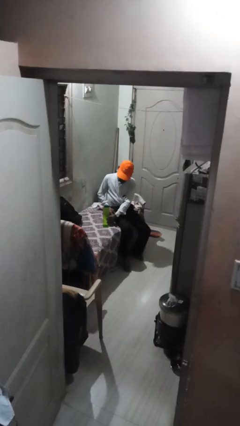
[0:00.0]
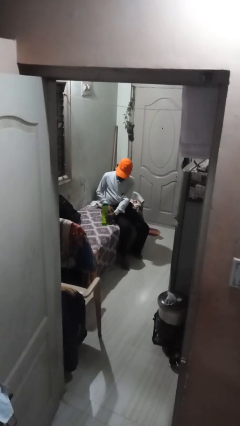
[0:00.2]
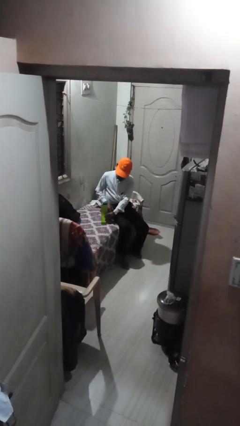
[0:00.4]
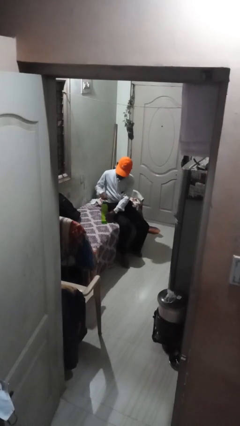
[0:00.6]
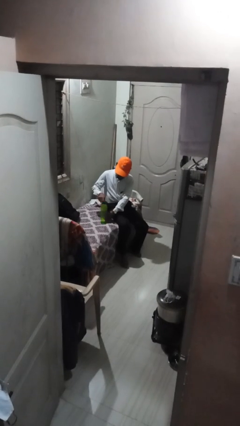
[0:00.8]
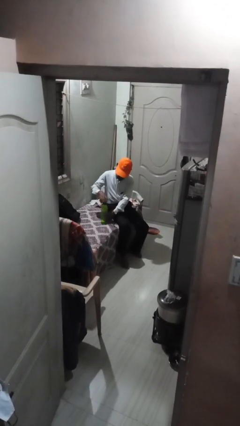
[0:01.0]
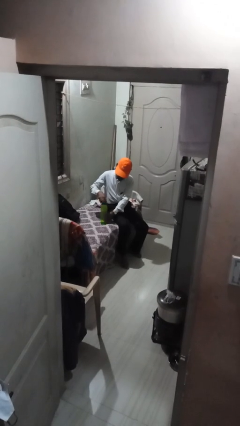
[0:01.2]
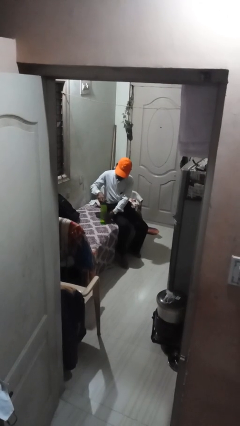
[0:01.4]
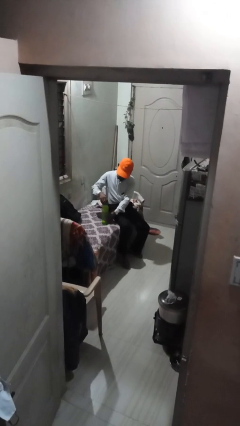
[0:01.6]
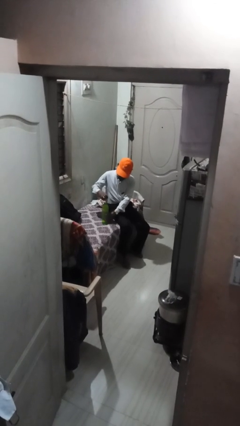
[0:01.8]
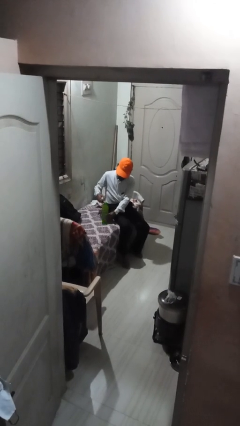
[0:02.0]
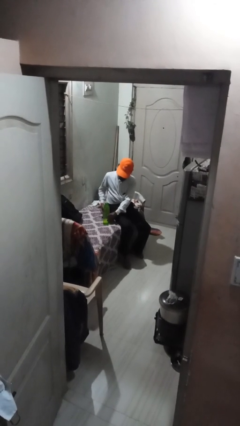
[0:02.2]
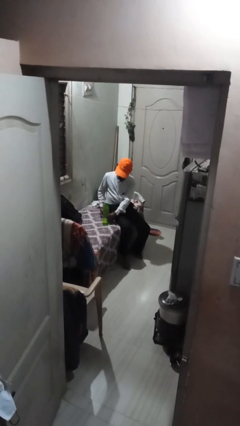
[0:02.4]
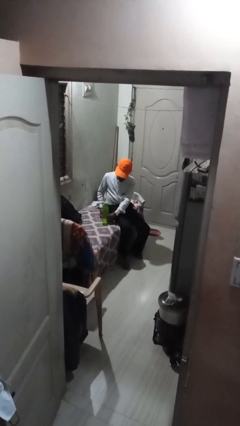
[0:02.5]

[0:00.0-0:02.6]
person unscrews lid from bottle

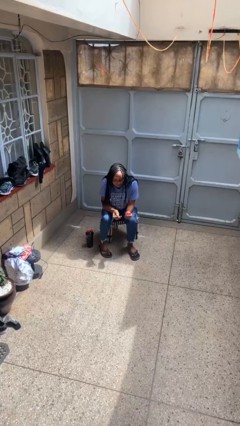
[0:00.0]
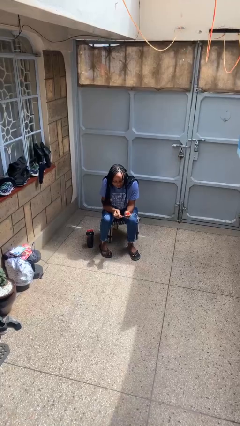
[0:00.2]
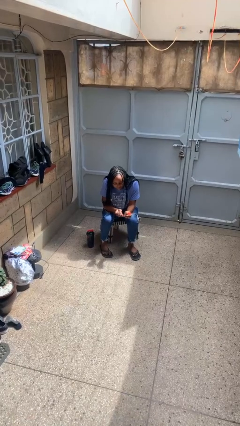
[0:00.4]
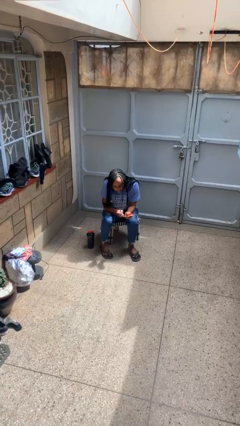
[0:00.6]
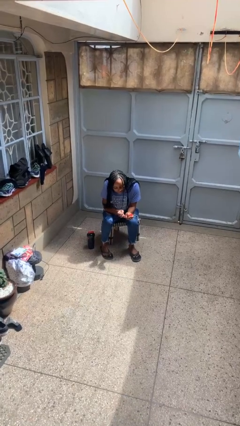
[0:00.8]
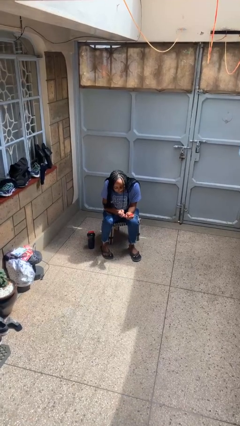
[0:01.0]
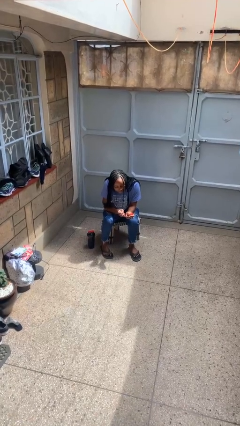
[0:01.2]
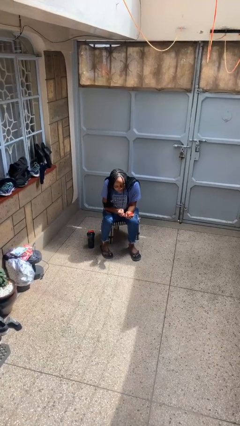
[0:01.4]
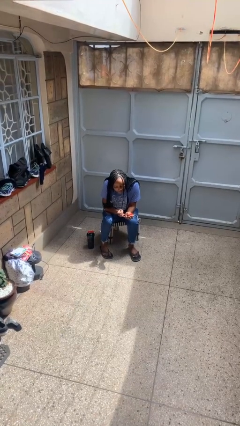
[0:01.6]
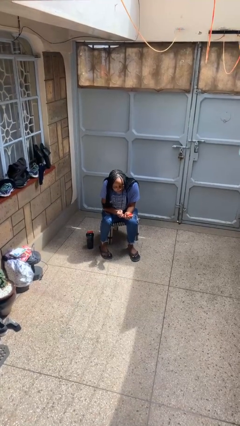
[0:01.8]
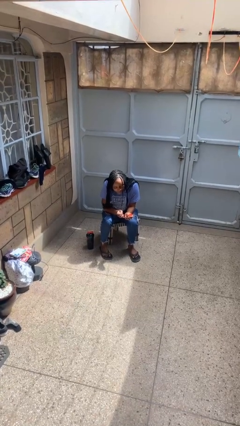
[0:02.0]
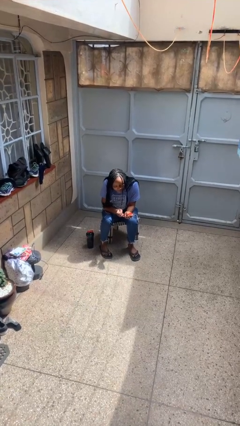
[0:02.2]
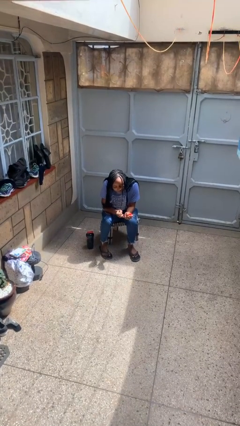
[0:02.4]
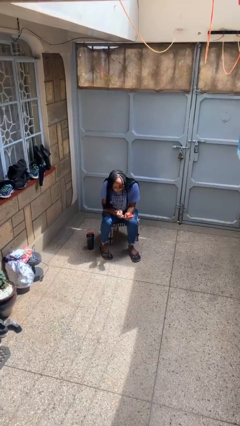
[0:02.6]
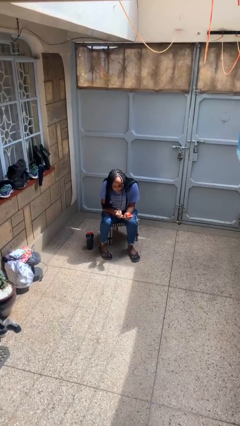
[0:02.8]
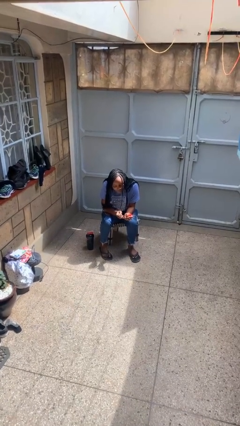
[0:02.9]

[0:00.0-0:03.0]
person paints fingernails

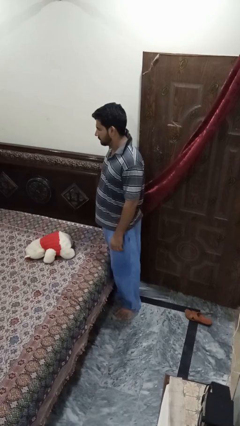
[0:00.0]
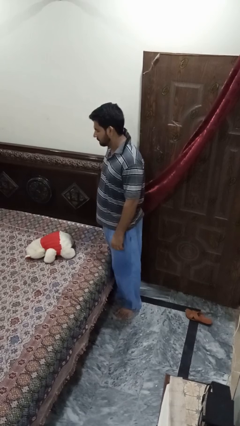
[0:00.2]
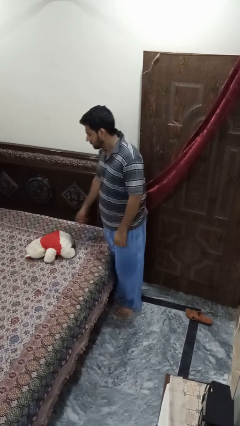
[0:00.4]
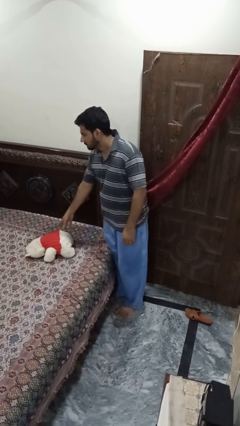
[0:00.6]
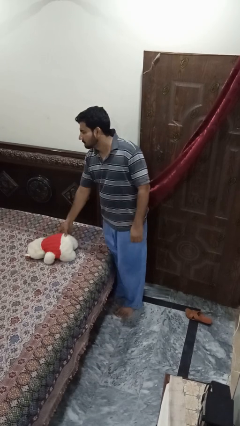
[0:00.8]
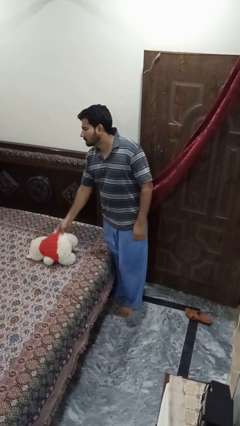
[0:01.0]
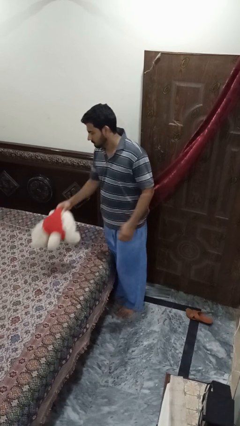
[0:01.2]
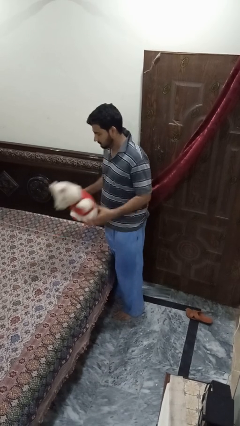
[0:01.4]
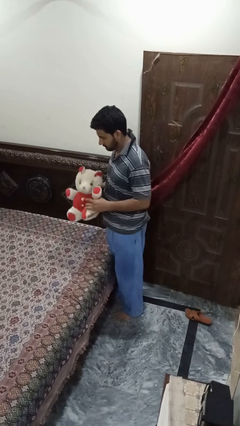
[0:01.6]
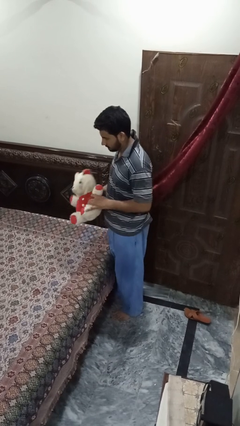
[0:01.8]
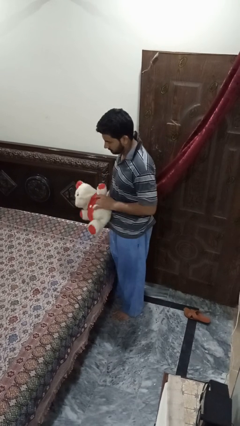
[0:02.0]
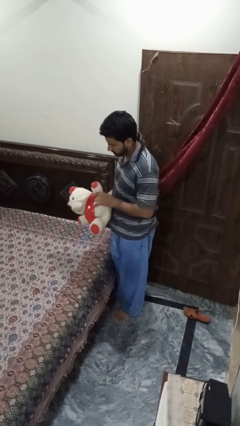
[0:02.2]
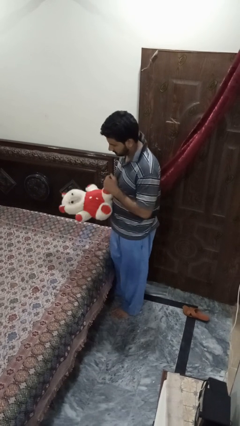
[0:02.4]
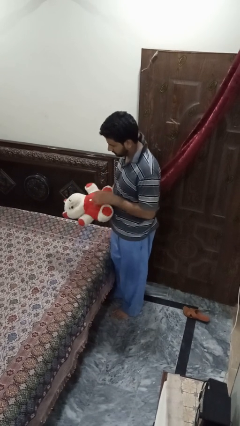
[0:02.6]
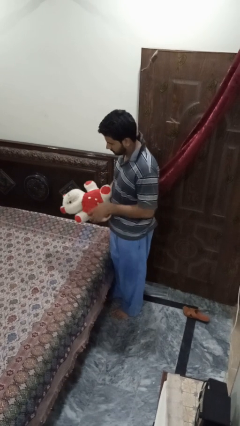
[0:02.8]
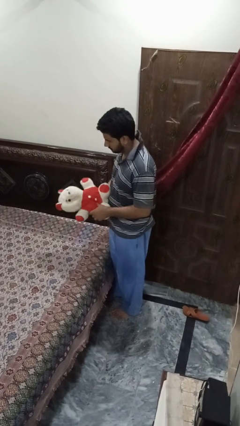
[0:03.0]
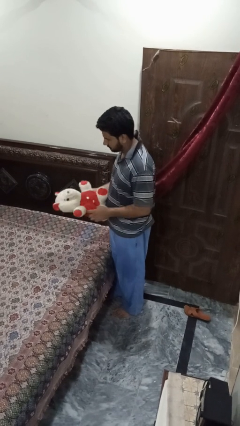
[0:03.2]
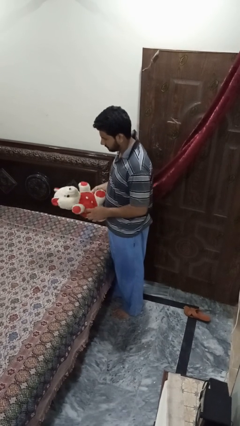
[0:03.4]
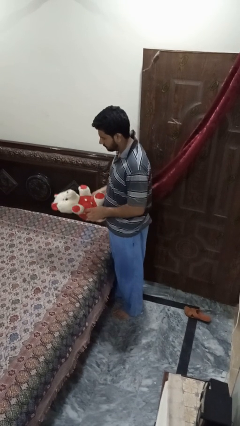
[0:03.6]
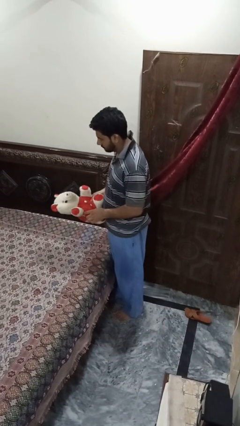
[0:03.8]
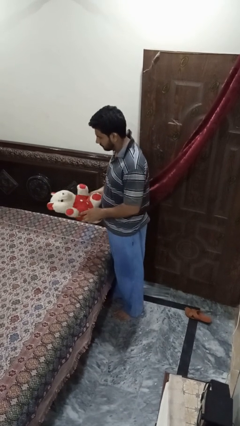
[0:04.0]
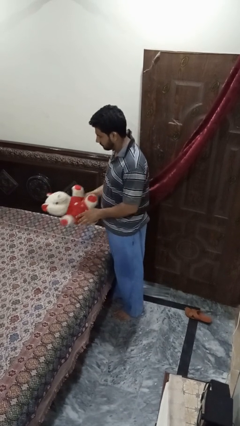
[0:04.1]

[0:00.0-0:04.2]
person picks up object from bed

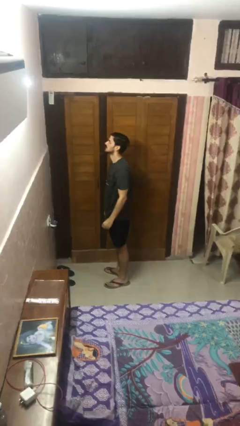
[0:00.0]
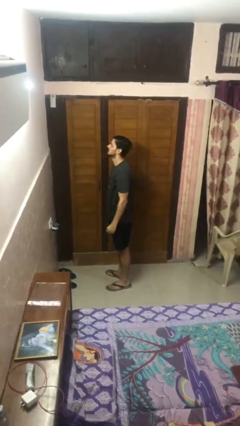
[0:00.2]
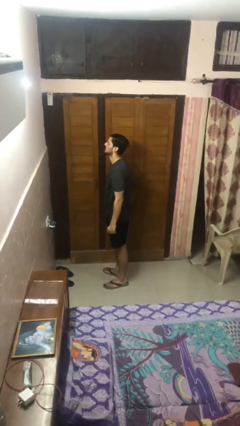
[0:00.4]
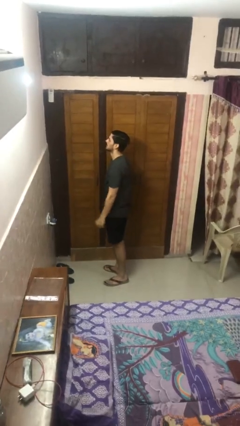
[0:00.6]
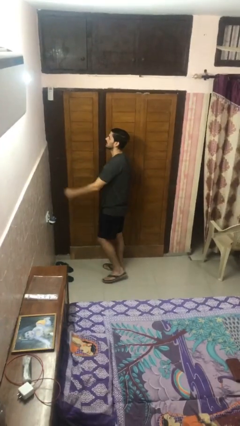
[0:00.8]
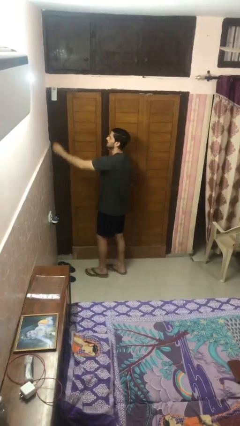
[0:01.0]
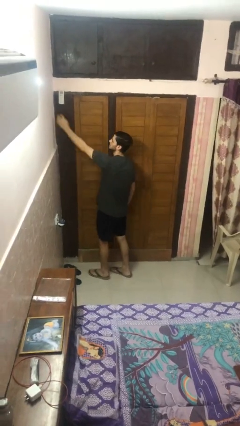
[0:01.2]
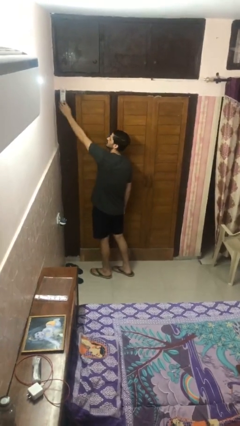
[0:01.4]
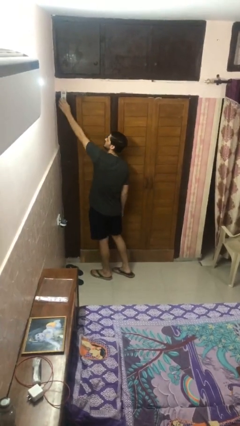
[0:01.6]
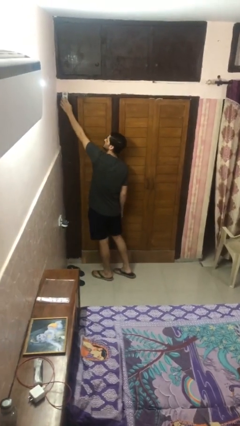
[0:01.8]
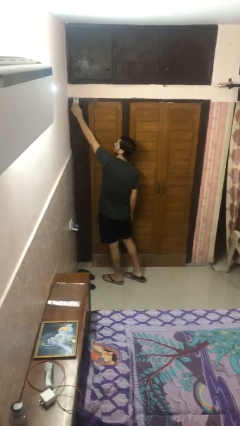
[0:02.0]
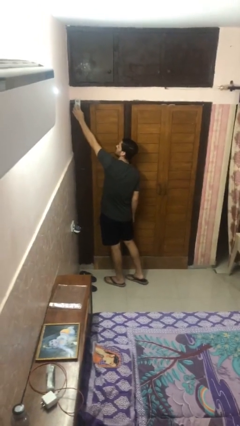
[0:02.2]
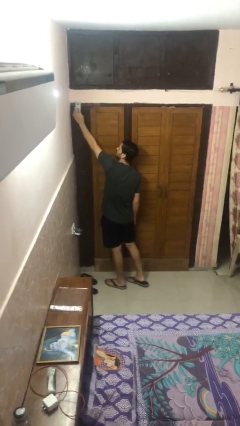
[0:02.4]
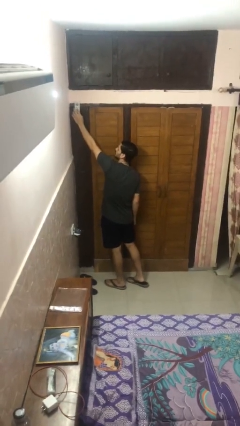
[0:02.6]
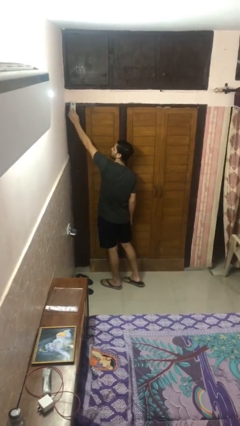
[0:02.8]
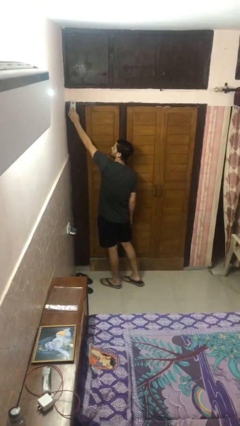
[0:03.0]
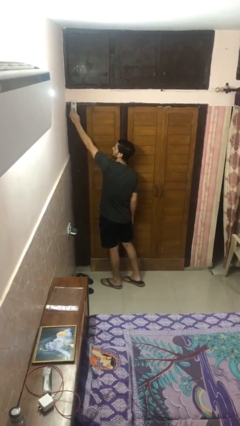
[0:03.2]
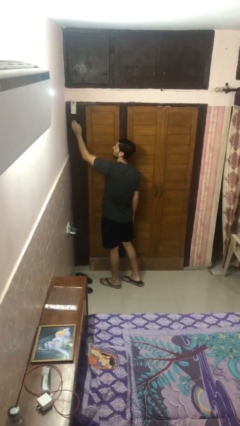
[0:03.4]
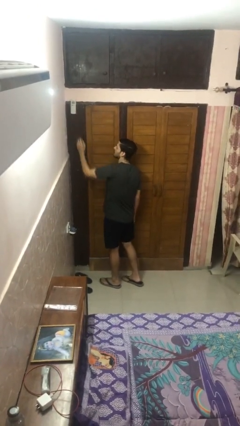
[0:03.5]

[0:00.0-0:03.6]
person adjusts thermostat

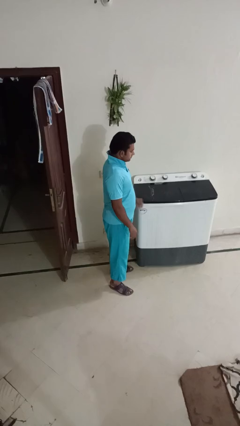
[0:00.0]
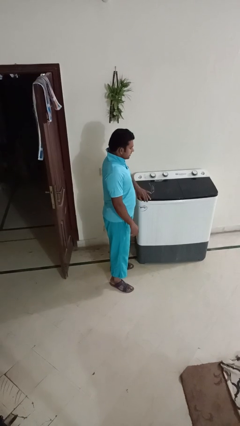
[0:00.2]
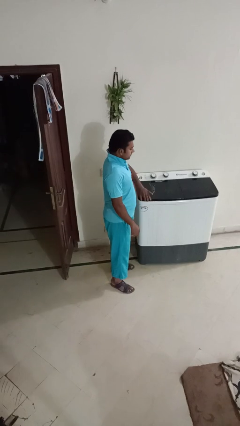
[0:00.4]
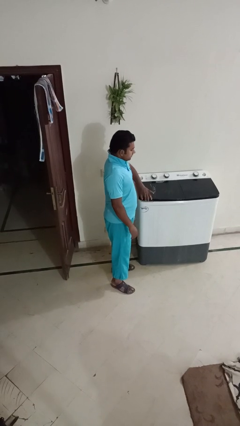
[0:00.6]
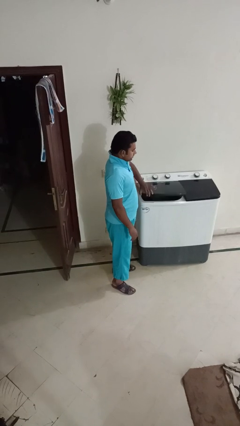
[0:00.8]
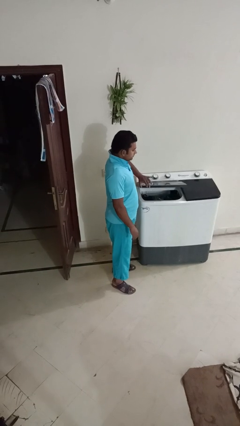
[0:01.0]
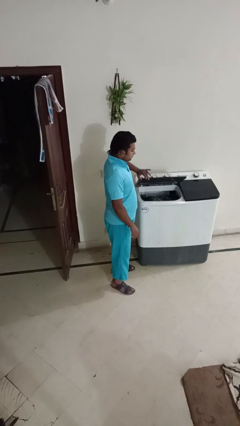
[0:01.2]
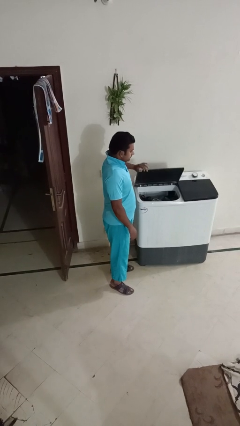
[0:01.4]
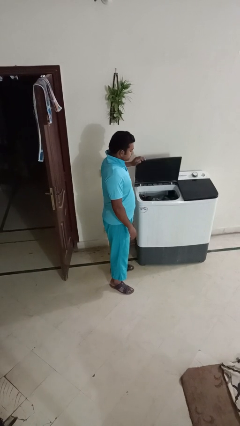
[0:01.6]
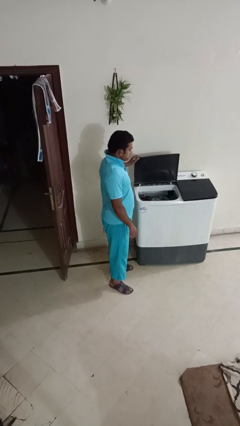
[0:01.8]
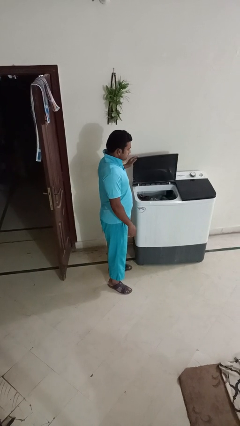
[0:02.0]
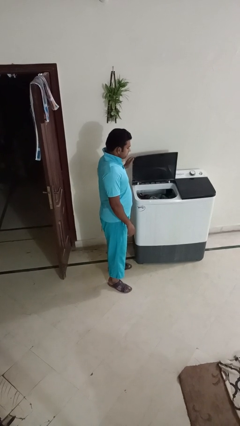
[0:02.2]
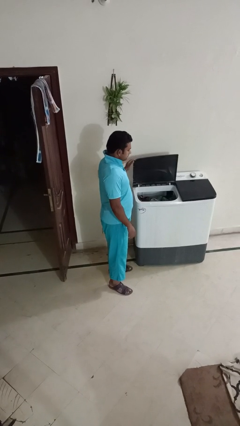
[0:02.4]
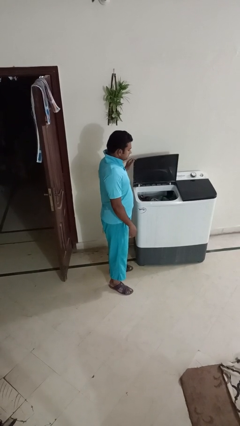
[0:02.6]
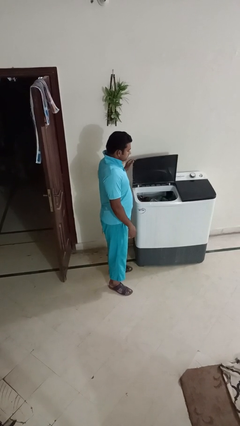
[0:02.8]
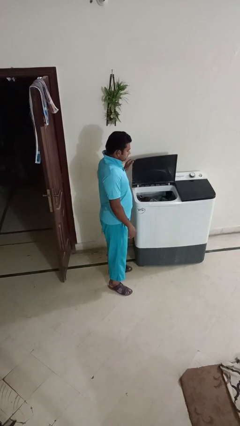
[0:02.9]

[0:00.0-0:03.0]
person opens clothes washer

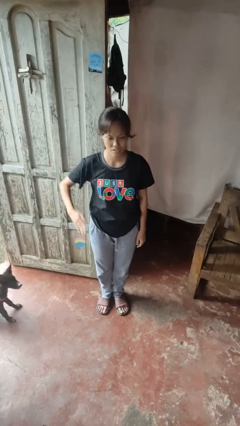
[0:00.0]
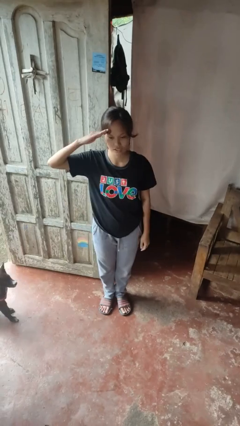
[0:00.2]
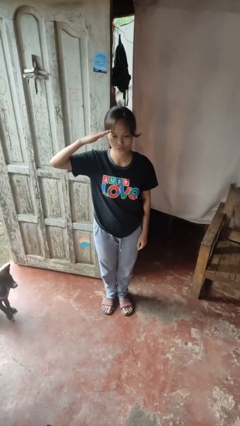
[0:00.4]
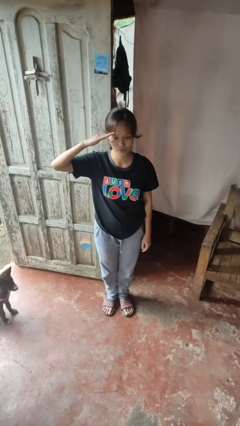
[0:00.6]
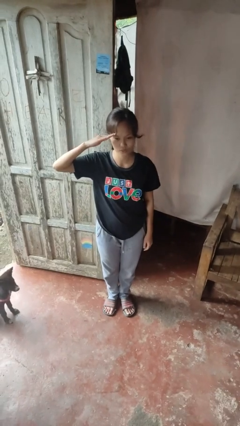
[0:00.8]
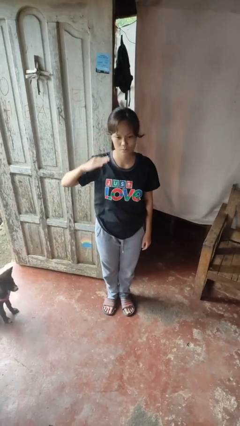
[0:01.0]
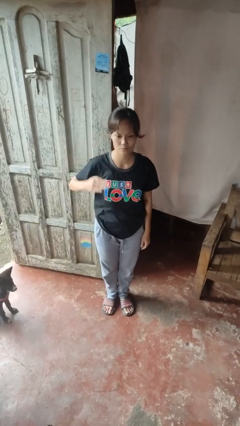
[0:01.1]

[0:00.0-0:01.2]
person salutes

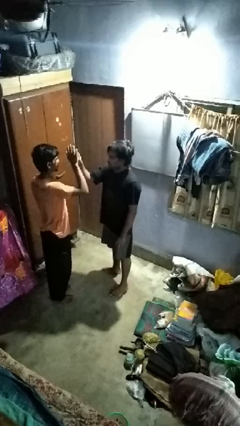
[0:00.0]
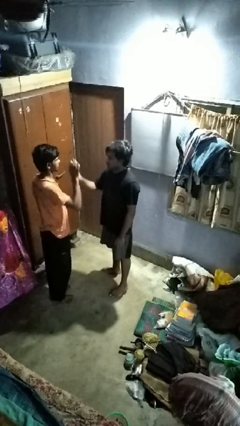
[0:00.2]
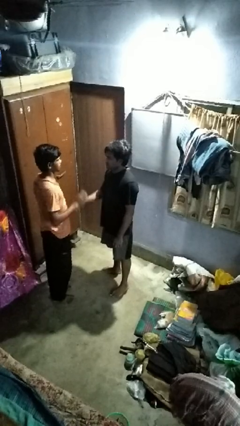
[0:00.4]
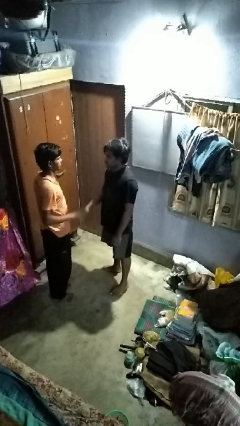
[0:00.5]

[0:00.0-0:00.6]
person highfives hand
